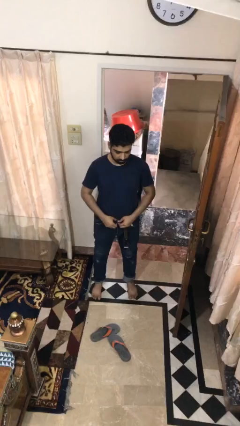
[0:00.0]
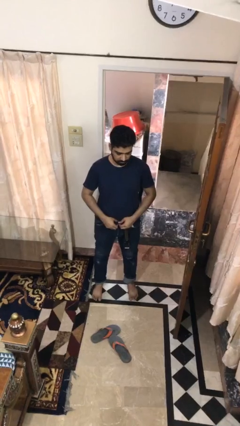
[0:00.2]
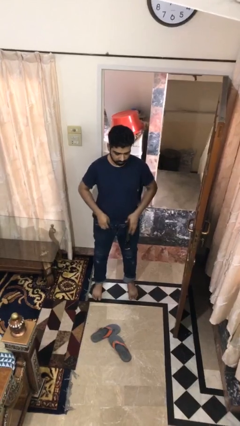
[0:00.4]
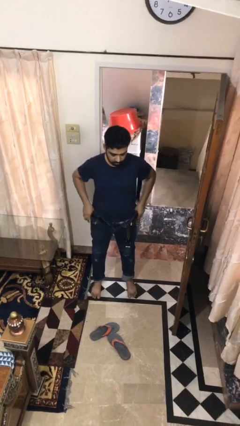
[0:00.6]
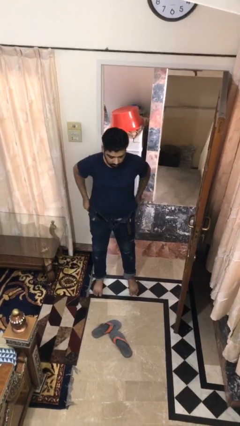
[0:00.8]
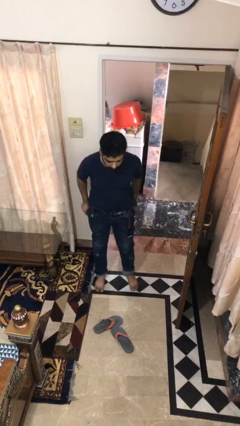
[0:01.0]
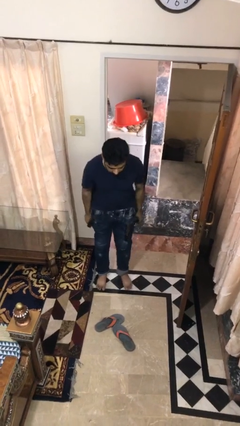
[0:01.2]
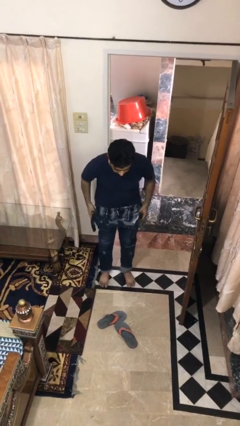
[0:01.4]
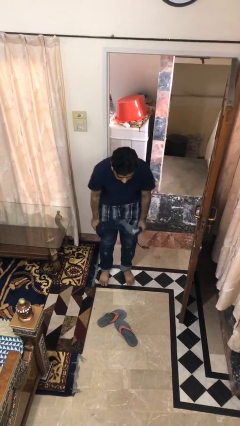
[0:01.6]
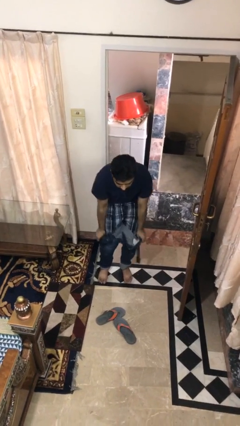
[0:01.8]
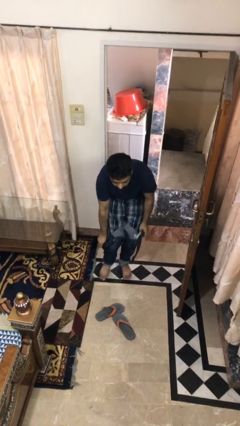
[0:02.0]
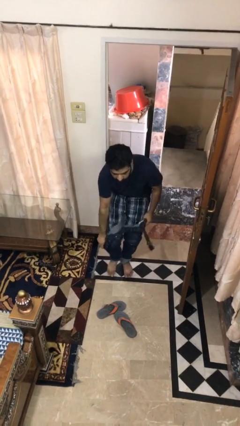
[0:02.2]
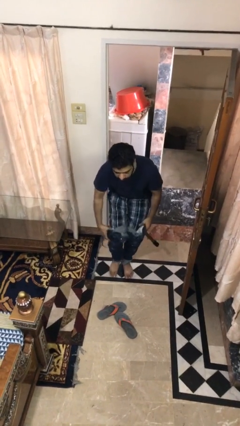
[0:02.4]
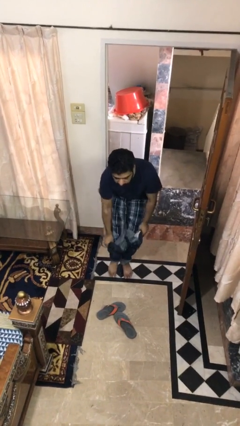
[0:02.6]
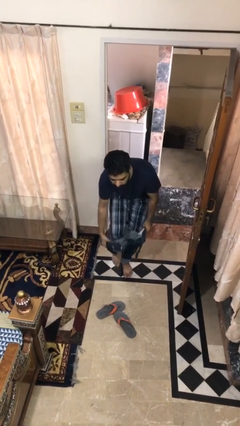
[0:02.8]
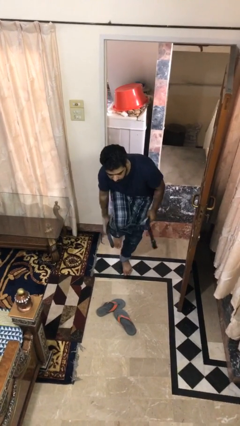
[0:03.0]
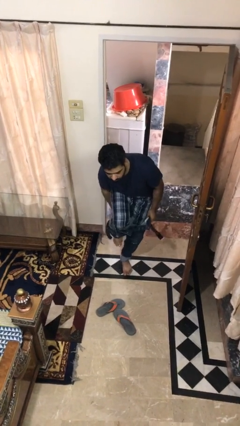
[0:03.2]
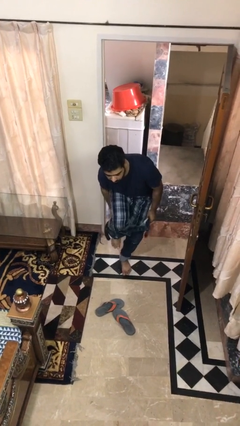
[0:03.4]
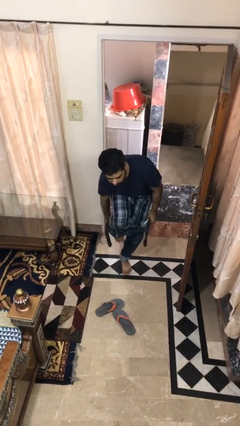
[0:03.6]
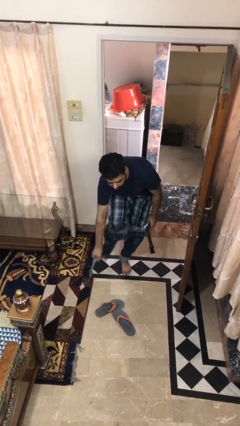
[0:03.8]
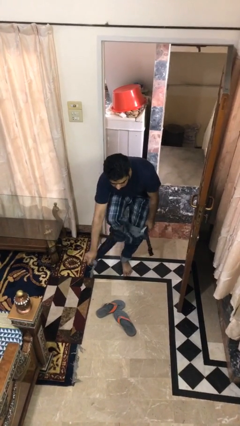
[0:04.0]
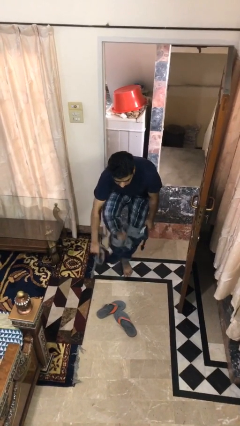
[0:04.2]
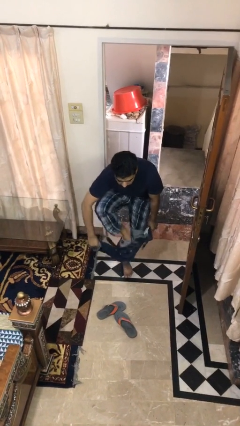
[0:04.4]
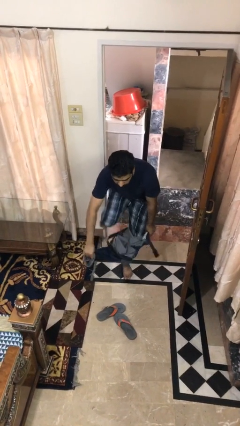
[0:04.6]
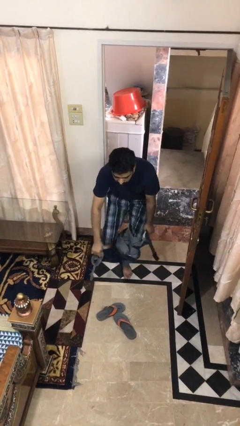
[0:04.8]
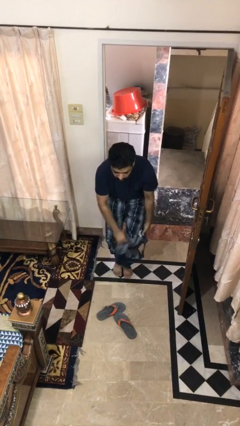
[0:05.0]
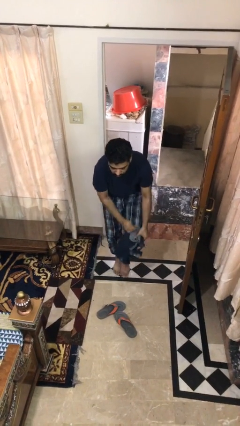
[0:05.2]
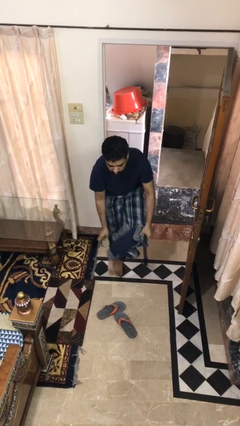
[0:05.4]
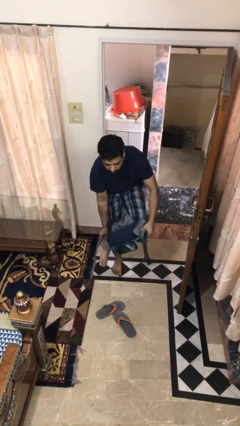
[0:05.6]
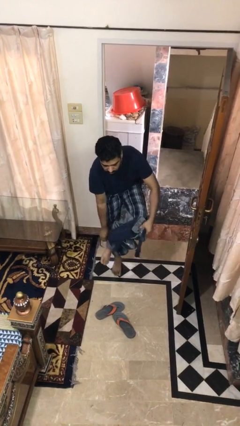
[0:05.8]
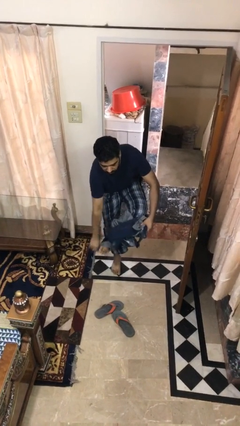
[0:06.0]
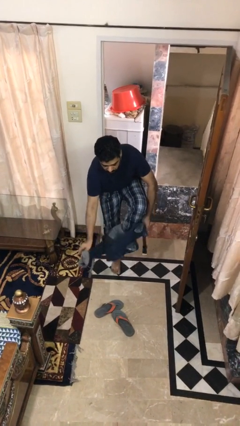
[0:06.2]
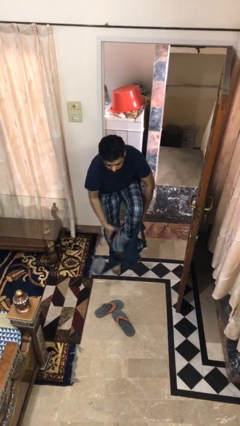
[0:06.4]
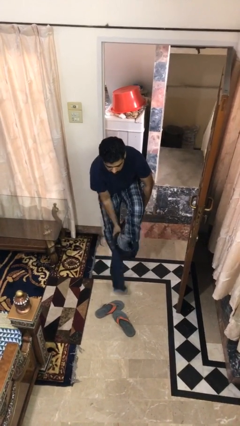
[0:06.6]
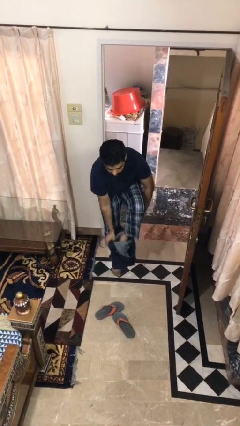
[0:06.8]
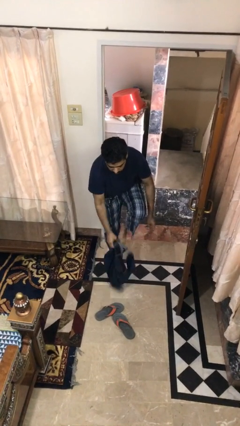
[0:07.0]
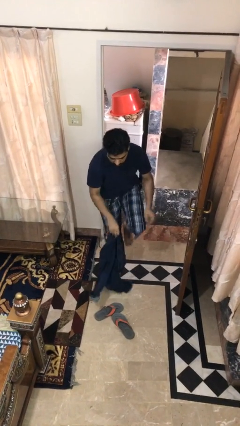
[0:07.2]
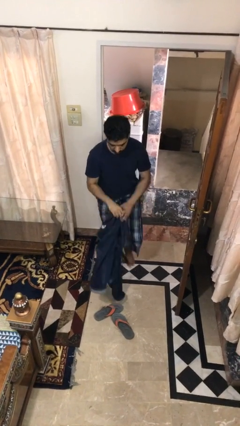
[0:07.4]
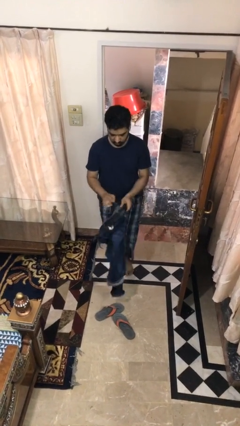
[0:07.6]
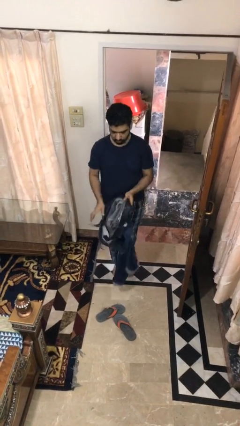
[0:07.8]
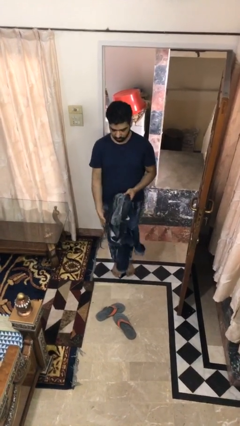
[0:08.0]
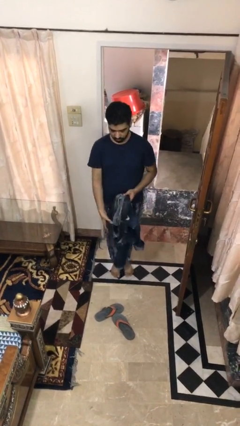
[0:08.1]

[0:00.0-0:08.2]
person takes off pants

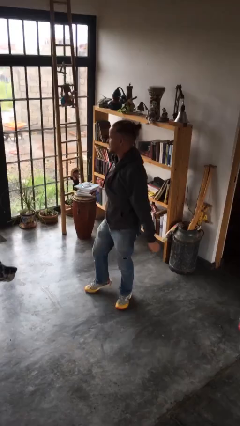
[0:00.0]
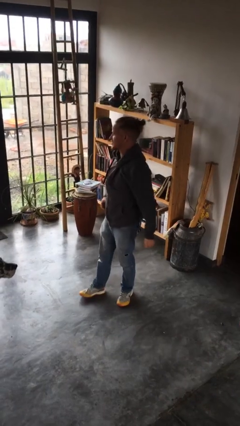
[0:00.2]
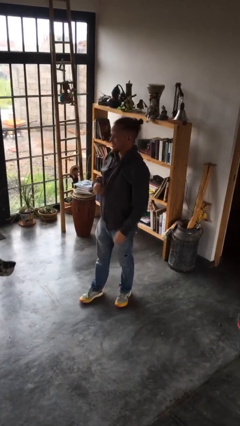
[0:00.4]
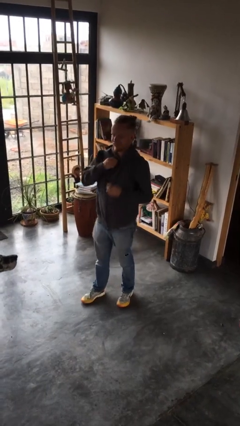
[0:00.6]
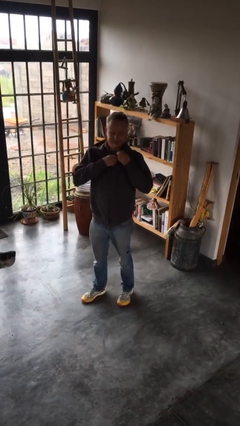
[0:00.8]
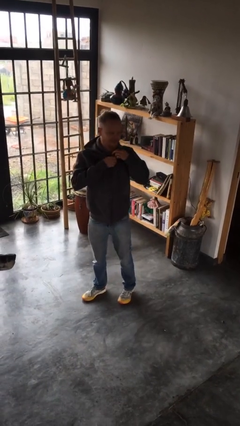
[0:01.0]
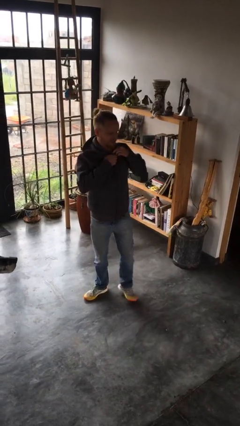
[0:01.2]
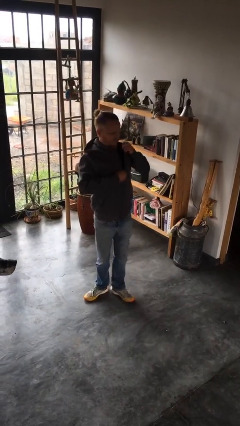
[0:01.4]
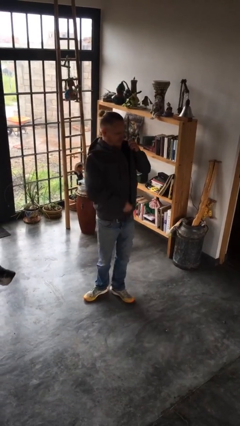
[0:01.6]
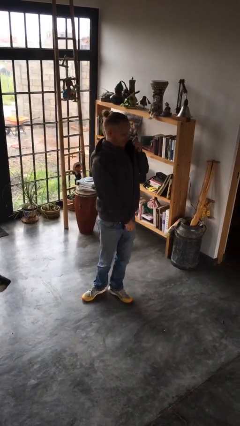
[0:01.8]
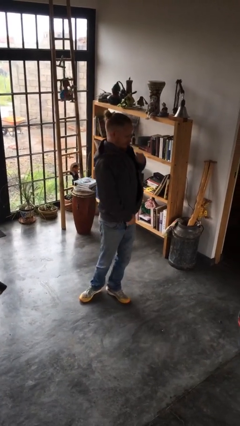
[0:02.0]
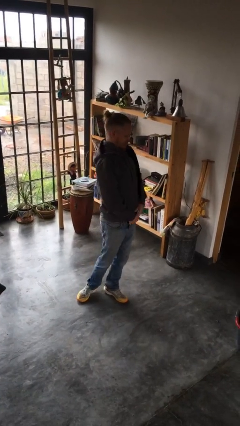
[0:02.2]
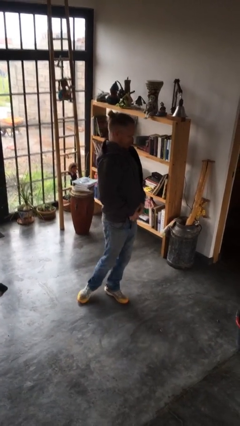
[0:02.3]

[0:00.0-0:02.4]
person unzips jacket

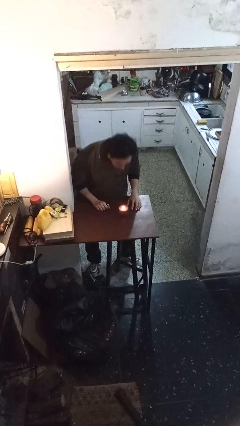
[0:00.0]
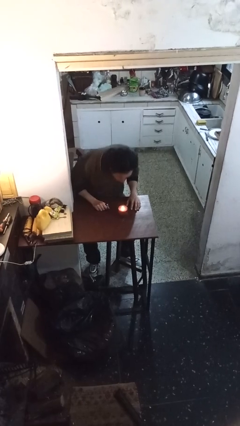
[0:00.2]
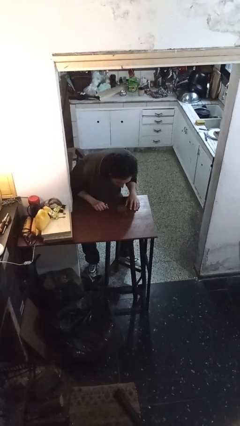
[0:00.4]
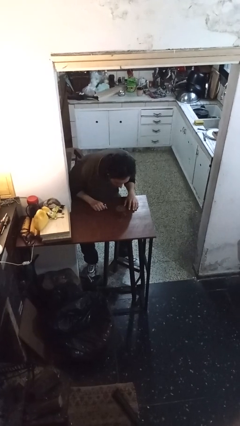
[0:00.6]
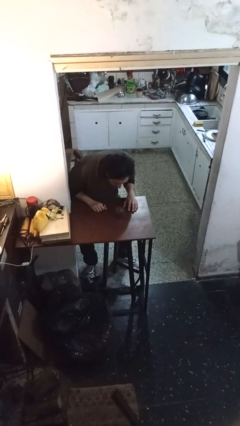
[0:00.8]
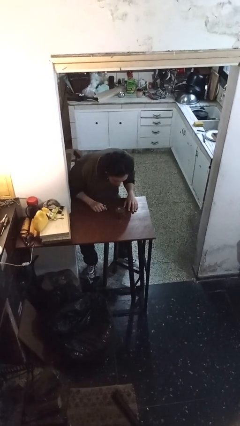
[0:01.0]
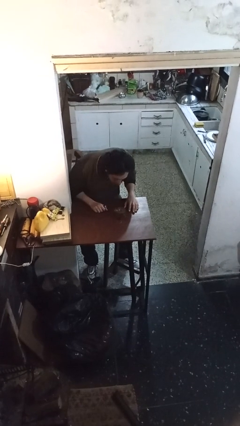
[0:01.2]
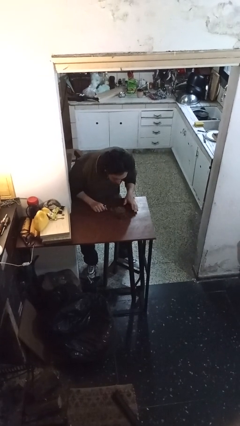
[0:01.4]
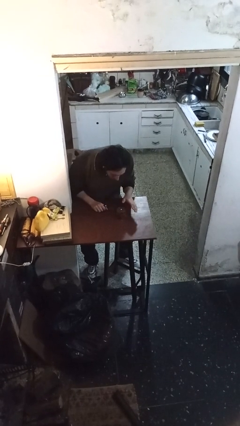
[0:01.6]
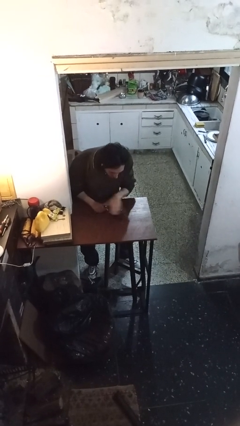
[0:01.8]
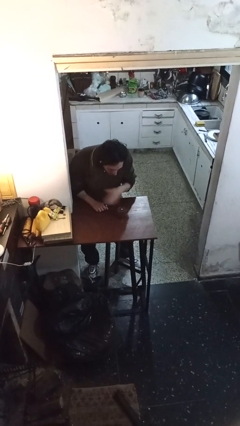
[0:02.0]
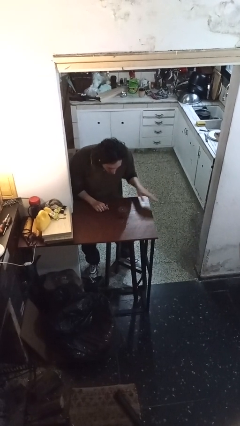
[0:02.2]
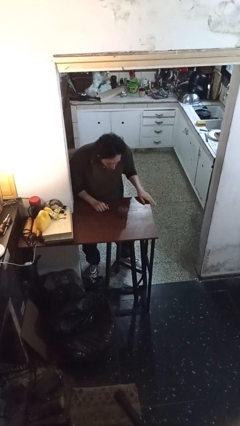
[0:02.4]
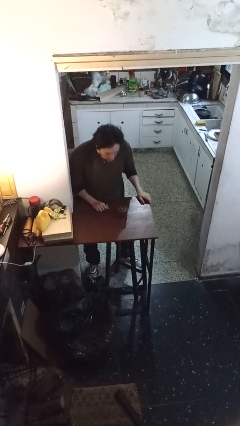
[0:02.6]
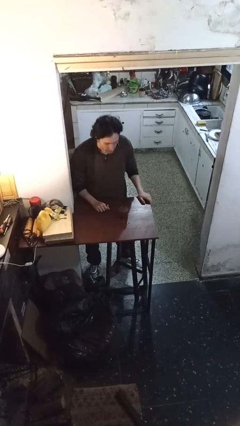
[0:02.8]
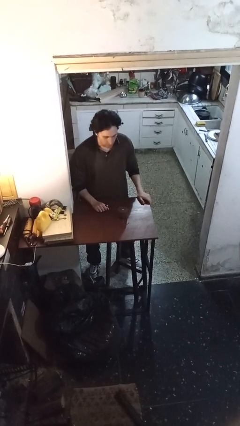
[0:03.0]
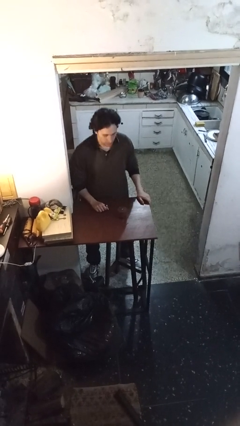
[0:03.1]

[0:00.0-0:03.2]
person extinguishes candle

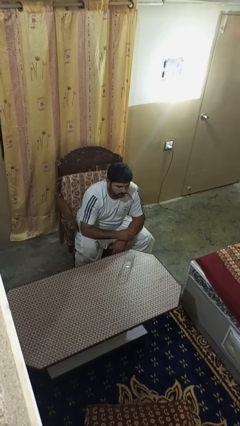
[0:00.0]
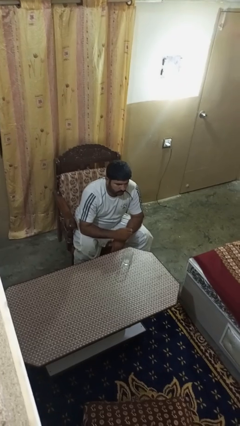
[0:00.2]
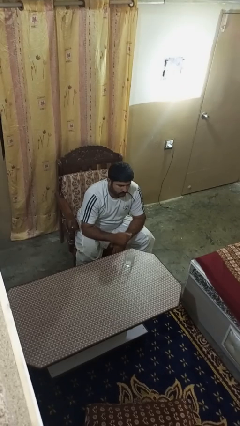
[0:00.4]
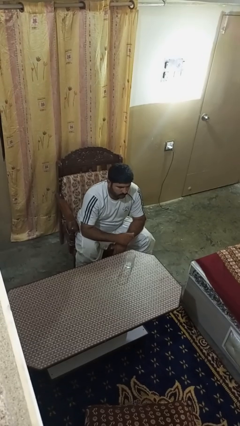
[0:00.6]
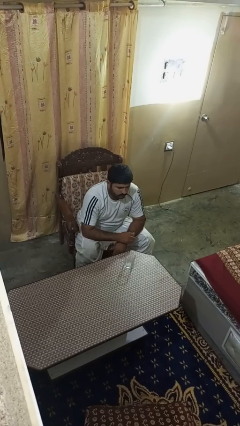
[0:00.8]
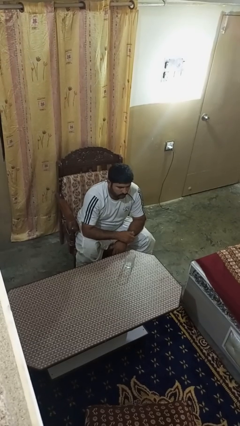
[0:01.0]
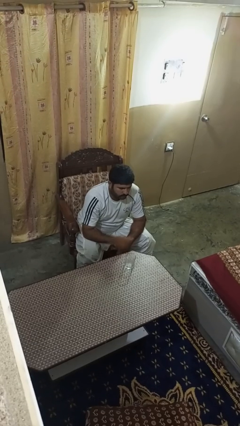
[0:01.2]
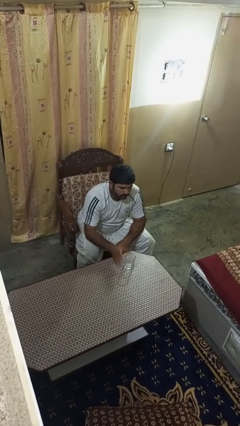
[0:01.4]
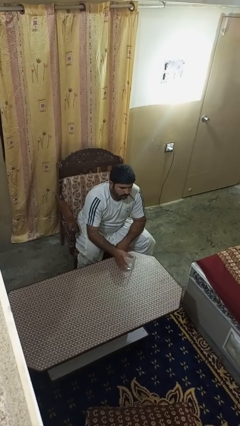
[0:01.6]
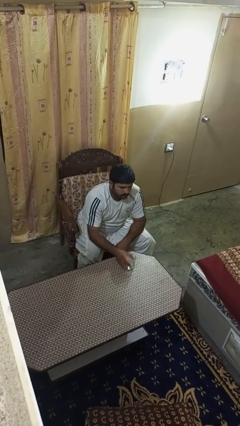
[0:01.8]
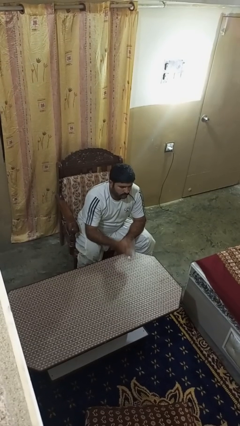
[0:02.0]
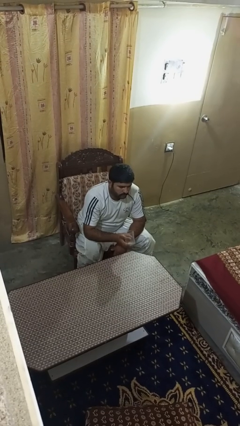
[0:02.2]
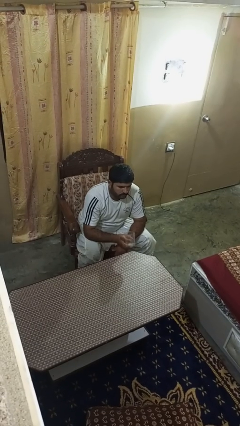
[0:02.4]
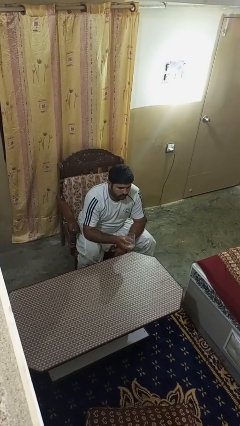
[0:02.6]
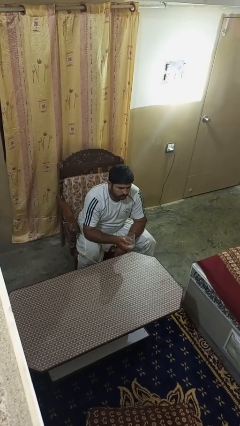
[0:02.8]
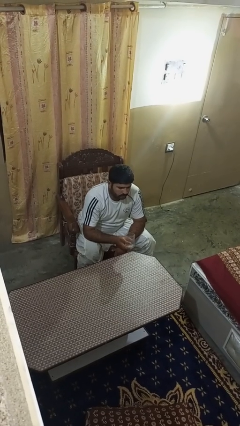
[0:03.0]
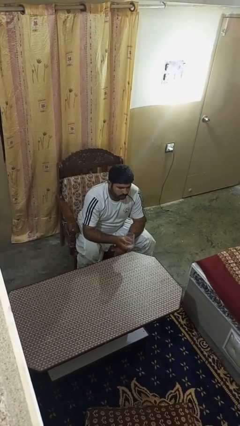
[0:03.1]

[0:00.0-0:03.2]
person picks up object from table

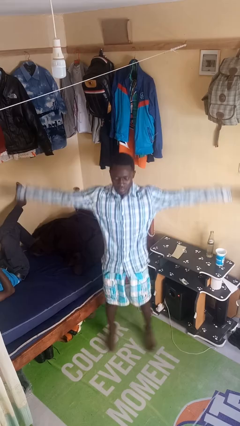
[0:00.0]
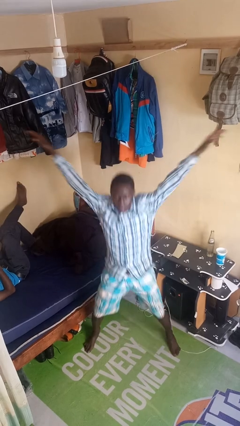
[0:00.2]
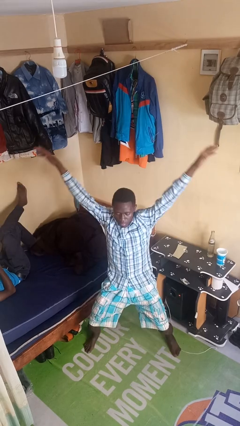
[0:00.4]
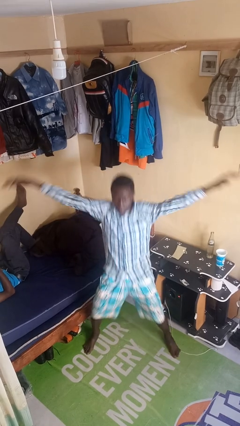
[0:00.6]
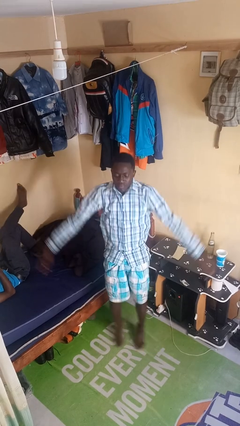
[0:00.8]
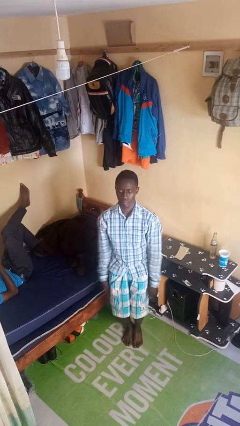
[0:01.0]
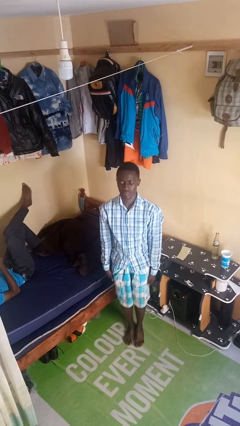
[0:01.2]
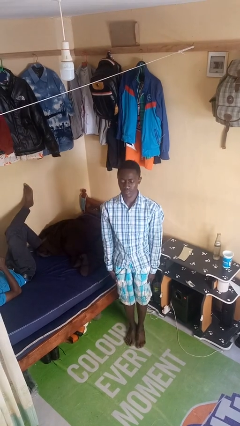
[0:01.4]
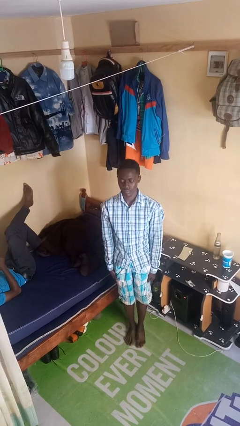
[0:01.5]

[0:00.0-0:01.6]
person exercises with jumping jacks
